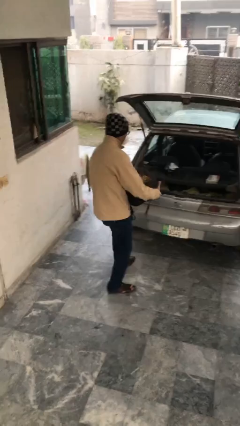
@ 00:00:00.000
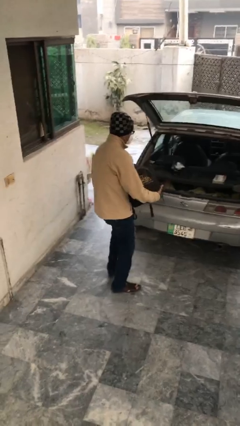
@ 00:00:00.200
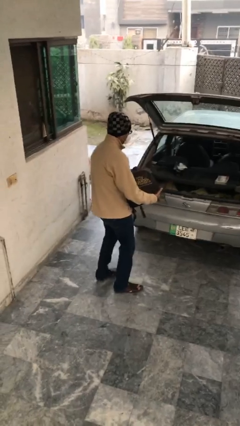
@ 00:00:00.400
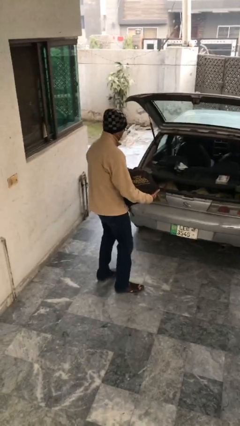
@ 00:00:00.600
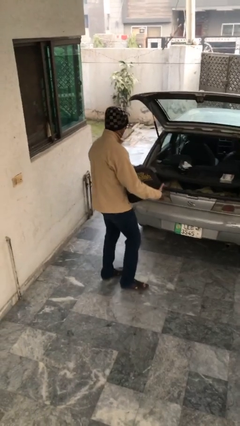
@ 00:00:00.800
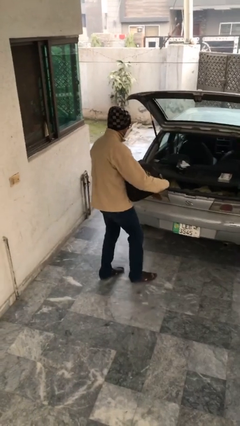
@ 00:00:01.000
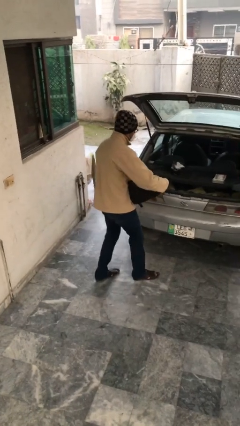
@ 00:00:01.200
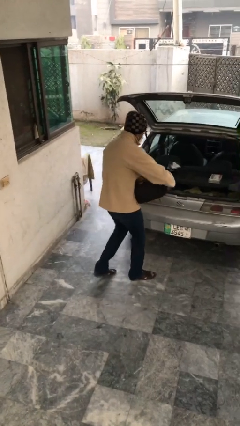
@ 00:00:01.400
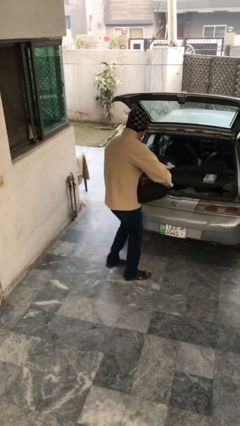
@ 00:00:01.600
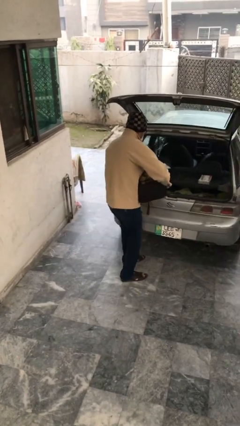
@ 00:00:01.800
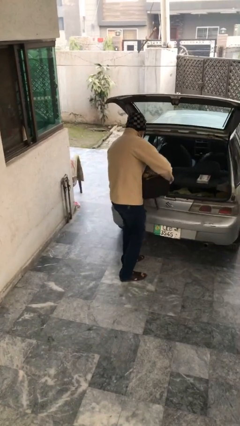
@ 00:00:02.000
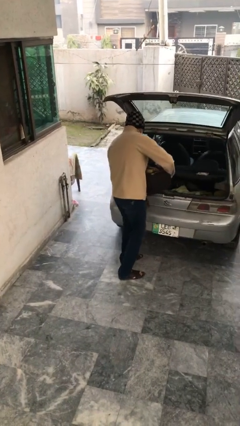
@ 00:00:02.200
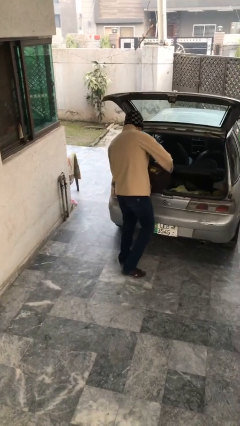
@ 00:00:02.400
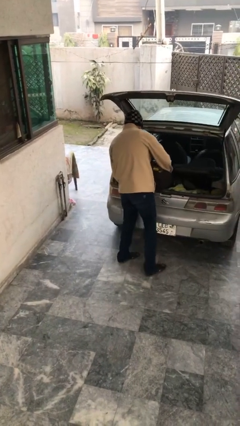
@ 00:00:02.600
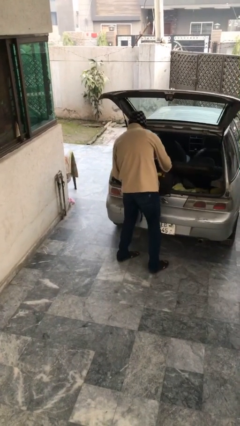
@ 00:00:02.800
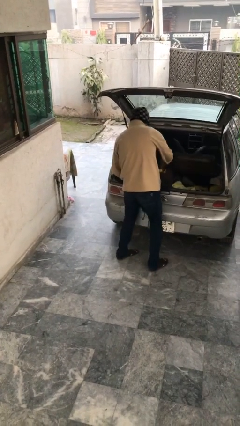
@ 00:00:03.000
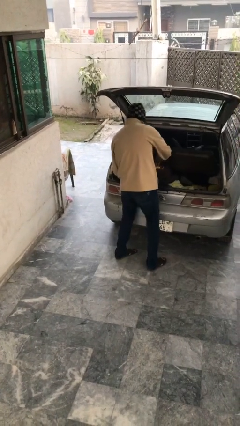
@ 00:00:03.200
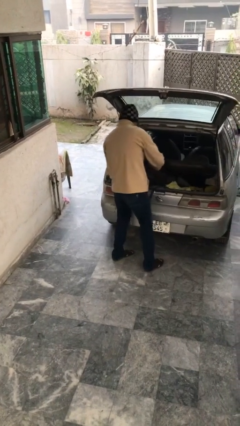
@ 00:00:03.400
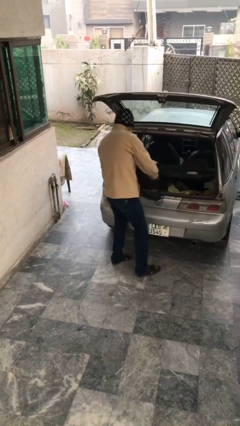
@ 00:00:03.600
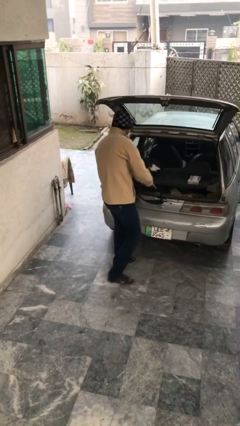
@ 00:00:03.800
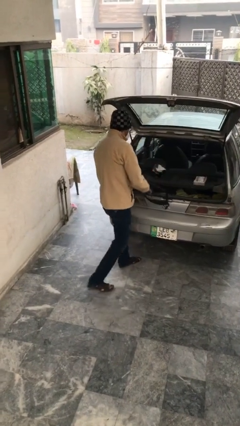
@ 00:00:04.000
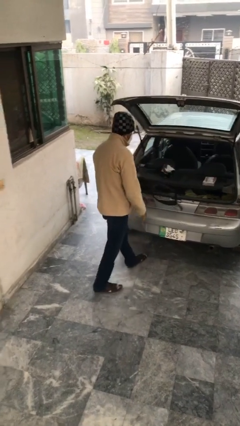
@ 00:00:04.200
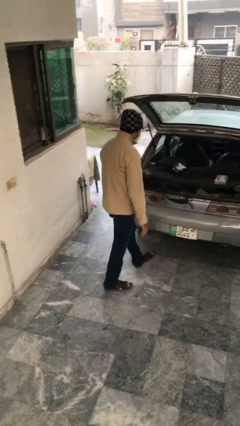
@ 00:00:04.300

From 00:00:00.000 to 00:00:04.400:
person loads car

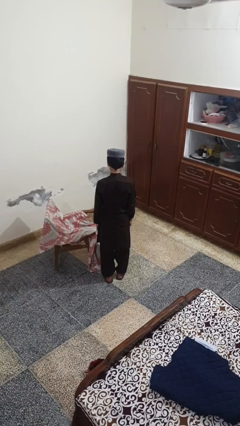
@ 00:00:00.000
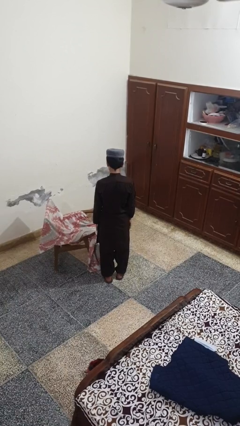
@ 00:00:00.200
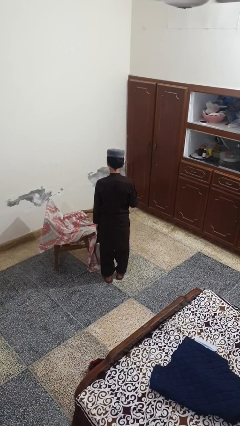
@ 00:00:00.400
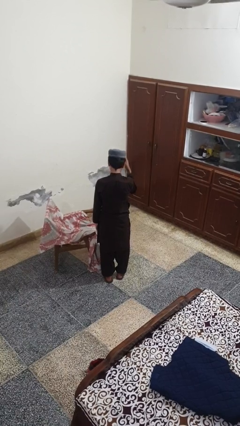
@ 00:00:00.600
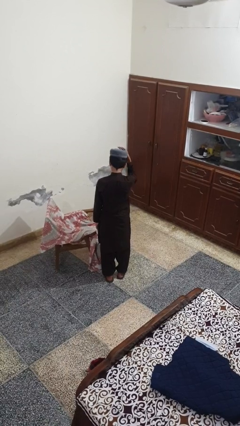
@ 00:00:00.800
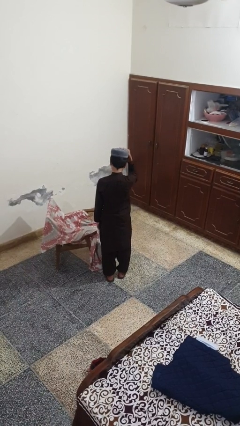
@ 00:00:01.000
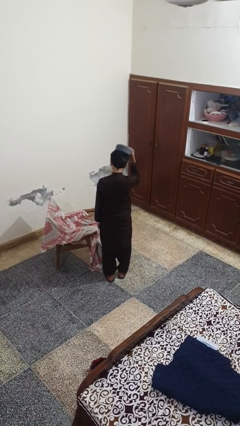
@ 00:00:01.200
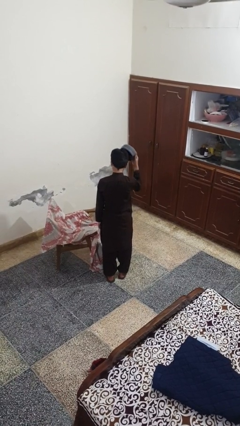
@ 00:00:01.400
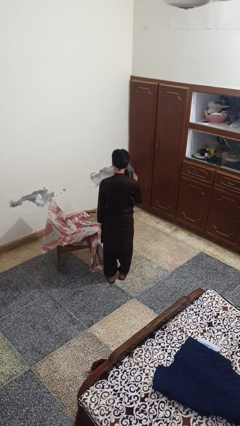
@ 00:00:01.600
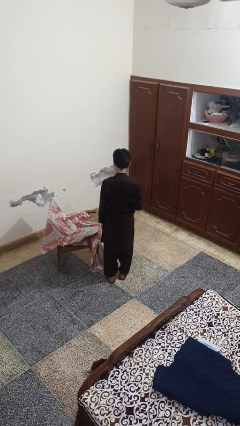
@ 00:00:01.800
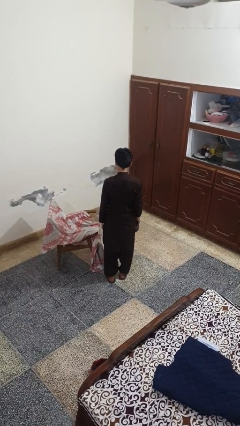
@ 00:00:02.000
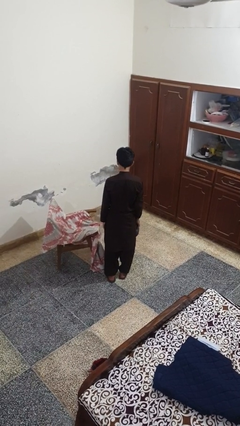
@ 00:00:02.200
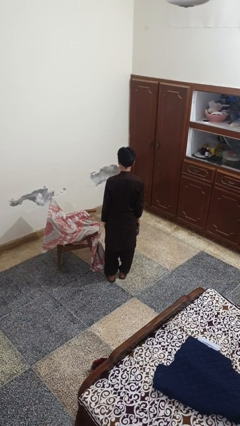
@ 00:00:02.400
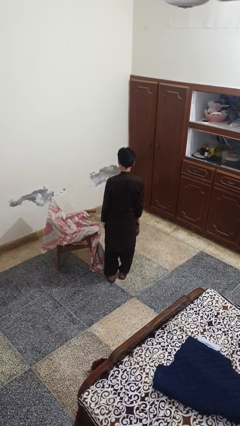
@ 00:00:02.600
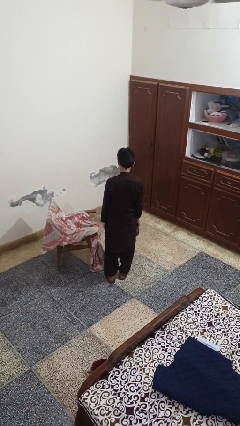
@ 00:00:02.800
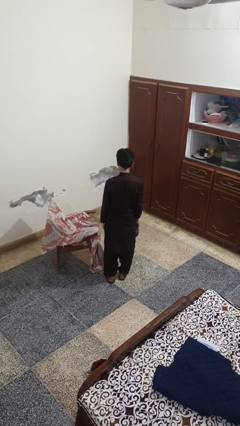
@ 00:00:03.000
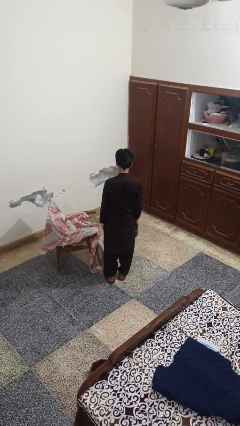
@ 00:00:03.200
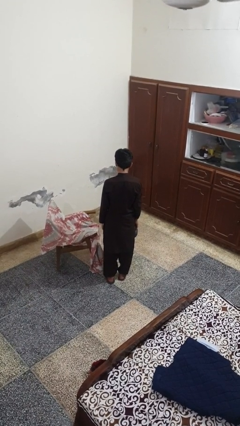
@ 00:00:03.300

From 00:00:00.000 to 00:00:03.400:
person takes off hat

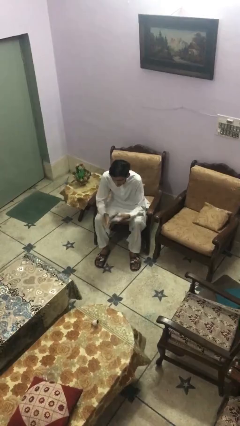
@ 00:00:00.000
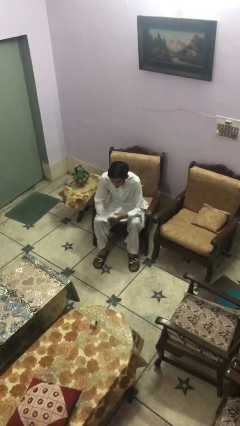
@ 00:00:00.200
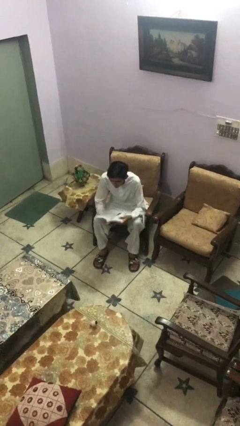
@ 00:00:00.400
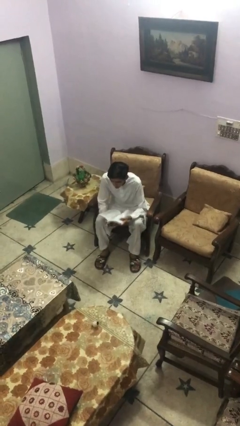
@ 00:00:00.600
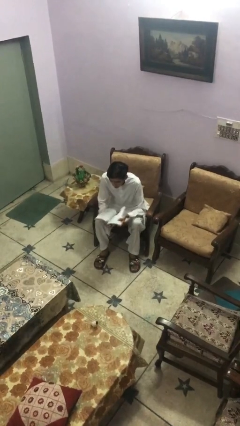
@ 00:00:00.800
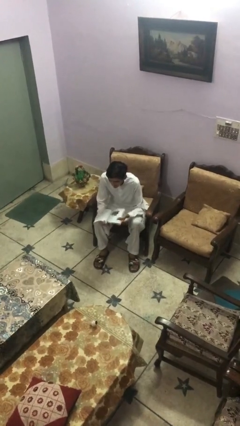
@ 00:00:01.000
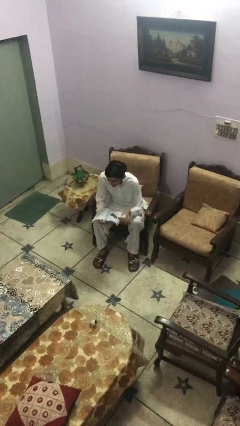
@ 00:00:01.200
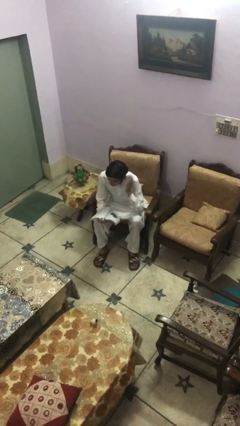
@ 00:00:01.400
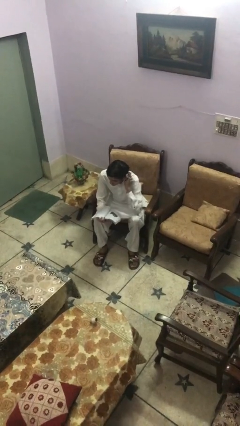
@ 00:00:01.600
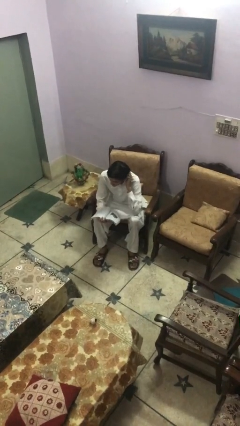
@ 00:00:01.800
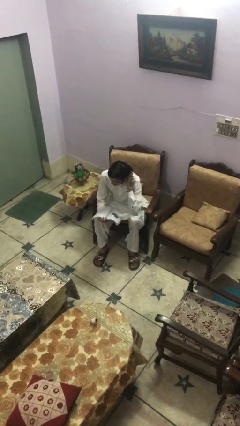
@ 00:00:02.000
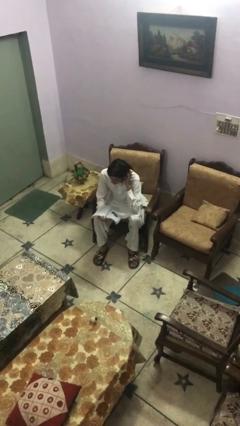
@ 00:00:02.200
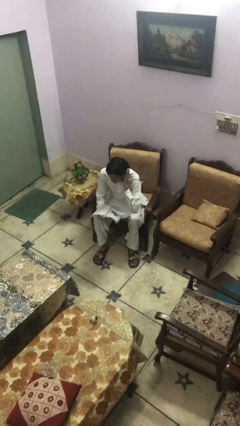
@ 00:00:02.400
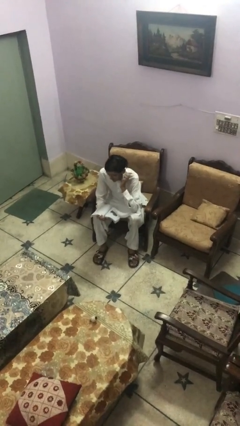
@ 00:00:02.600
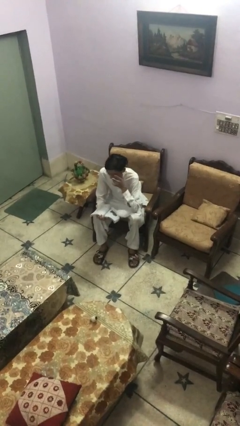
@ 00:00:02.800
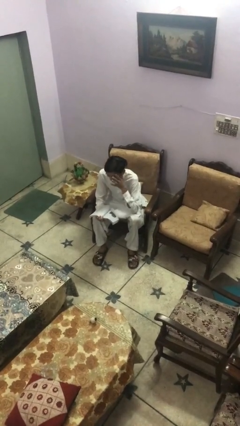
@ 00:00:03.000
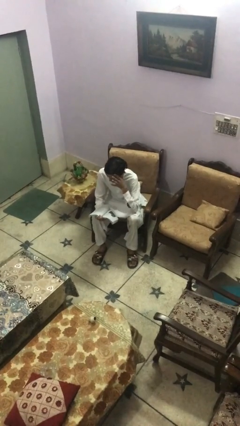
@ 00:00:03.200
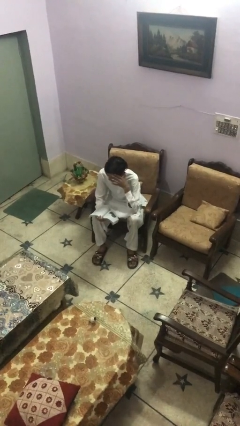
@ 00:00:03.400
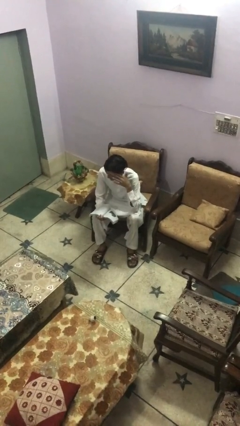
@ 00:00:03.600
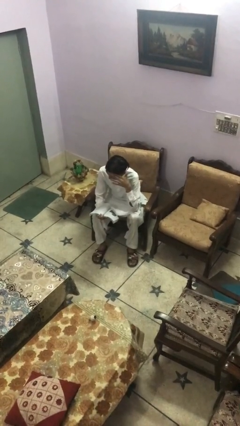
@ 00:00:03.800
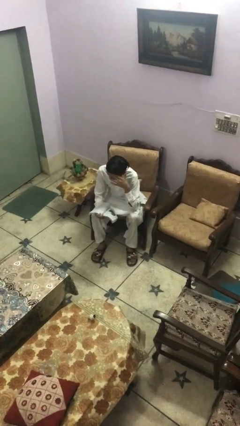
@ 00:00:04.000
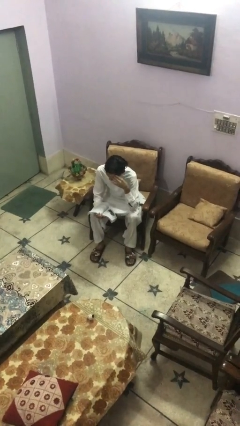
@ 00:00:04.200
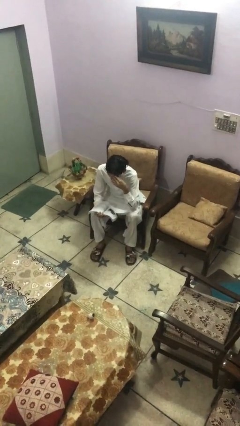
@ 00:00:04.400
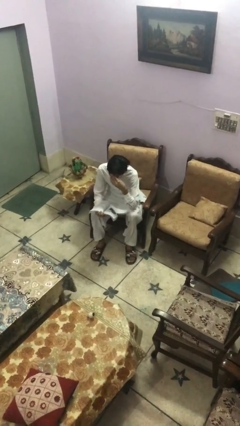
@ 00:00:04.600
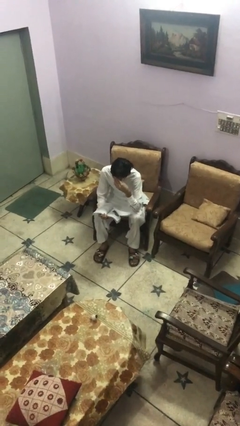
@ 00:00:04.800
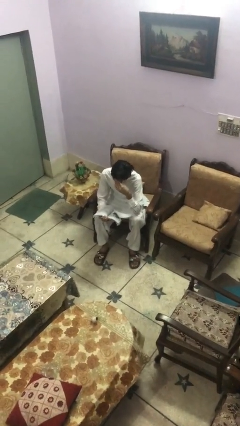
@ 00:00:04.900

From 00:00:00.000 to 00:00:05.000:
person reads document

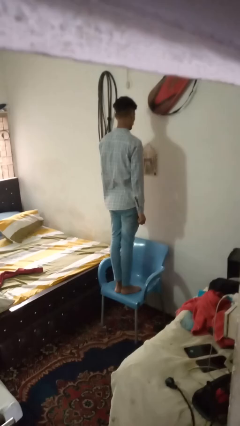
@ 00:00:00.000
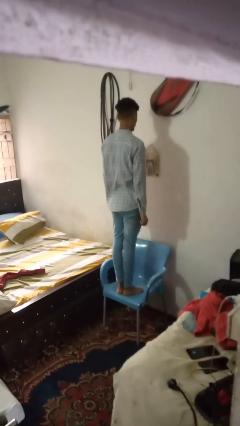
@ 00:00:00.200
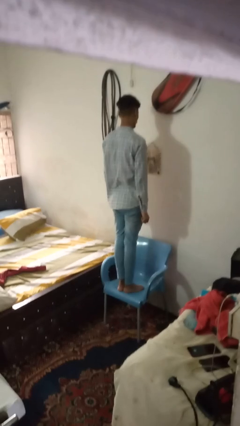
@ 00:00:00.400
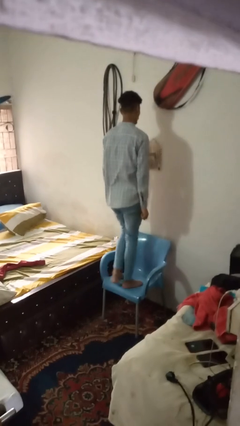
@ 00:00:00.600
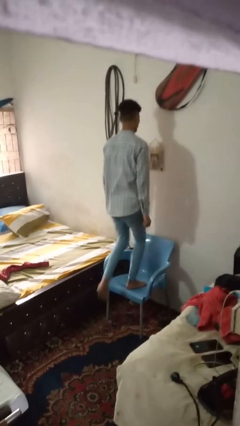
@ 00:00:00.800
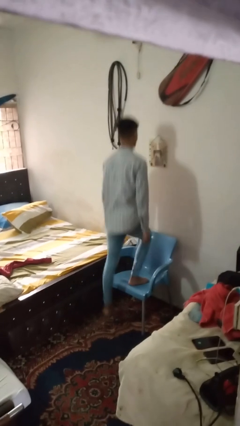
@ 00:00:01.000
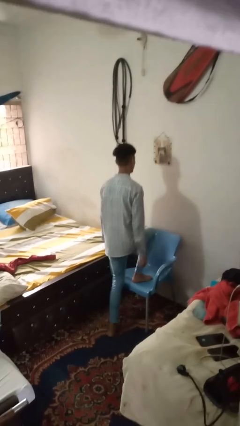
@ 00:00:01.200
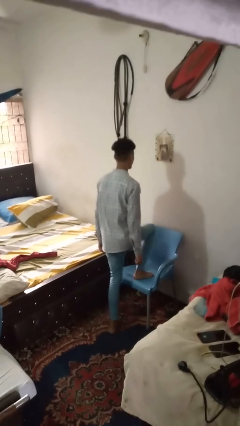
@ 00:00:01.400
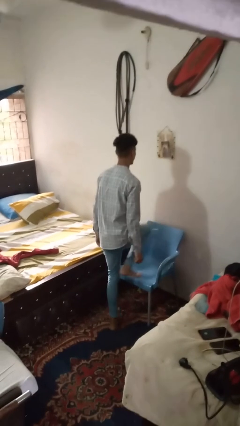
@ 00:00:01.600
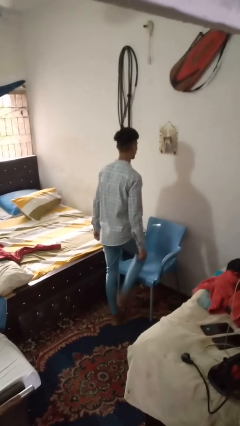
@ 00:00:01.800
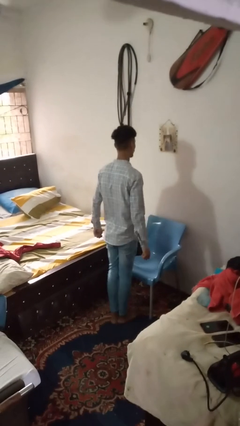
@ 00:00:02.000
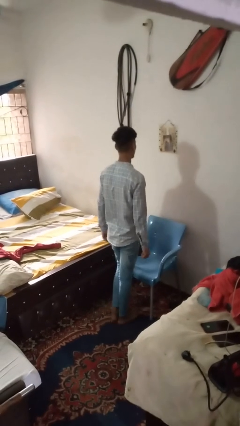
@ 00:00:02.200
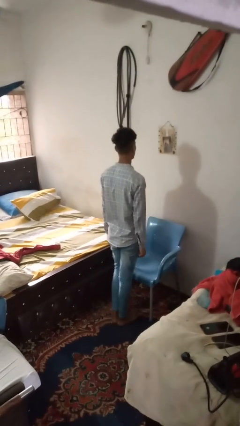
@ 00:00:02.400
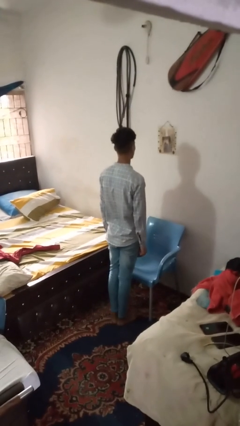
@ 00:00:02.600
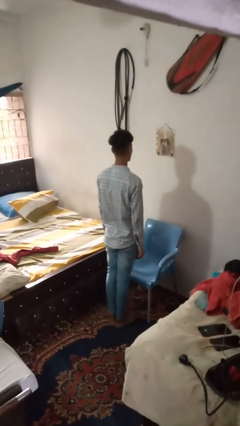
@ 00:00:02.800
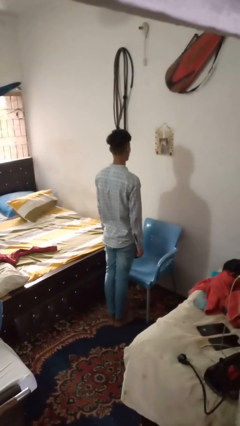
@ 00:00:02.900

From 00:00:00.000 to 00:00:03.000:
person climbs off chair

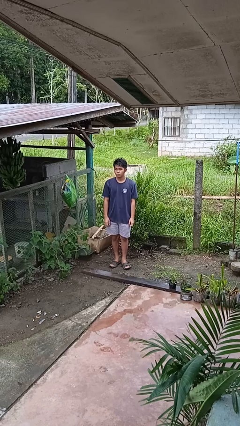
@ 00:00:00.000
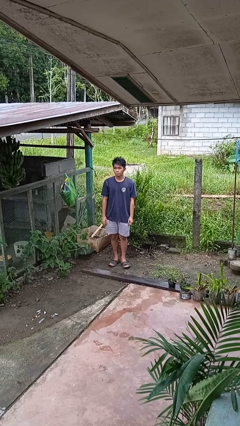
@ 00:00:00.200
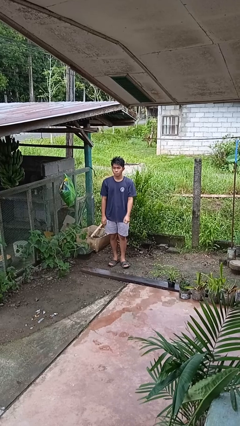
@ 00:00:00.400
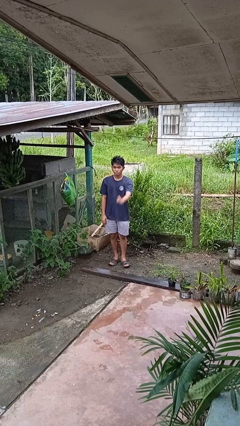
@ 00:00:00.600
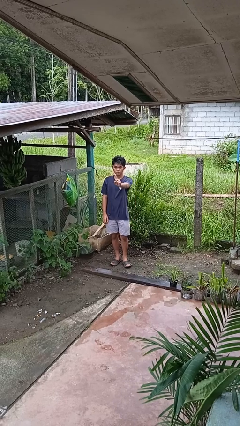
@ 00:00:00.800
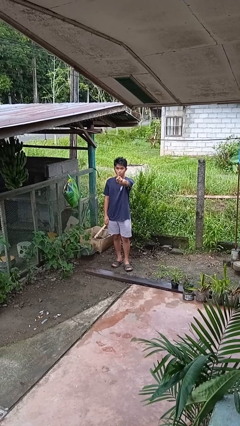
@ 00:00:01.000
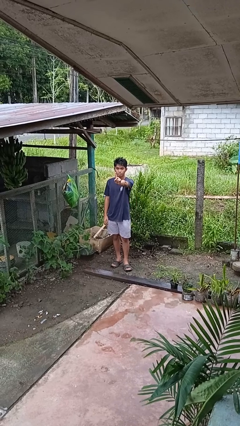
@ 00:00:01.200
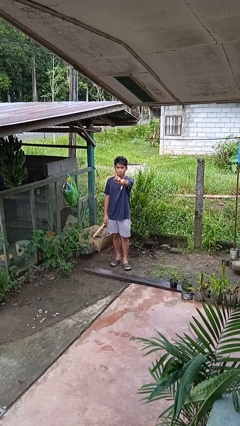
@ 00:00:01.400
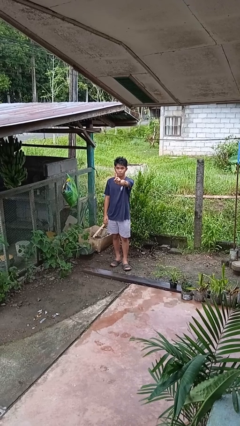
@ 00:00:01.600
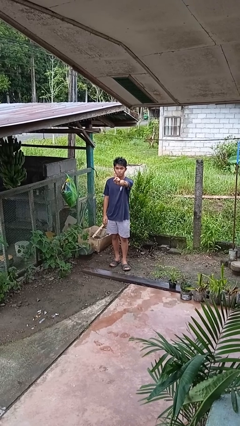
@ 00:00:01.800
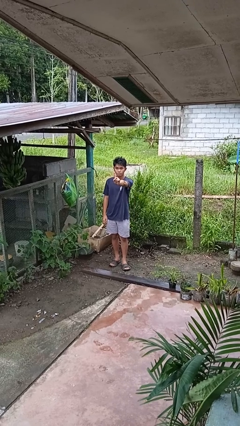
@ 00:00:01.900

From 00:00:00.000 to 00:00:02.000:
person gestures number one
